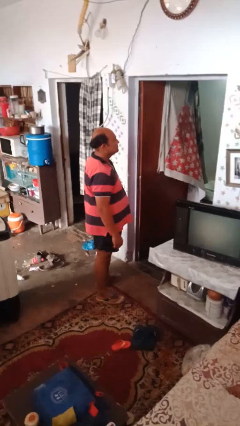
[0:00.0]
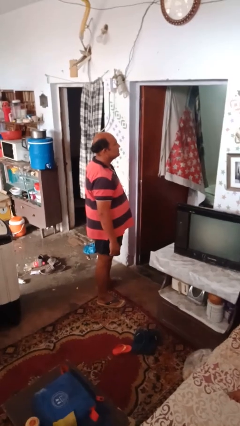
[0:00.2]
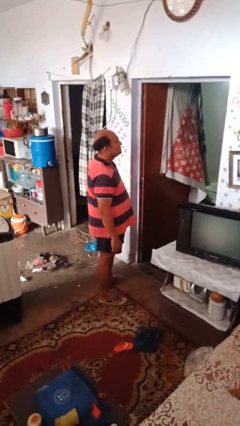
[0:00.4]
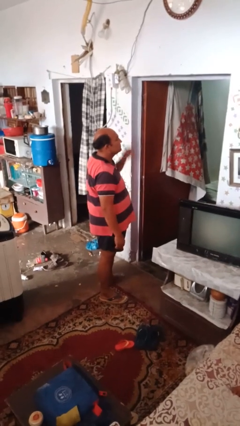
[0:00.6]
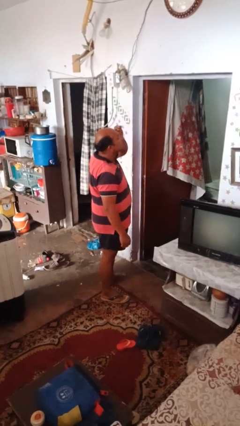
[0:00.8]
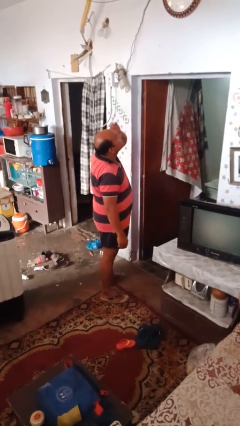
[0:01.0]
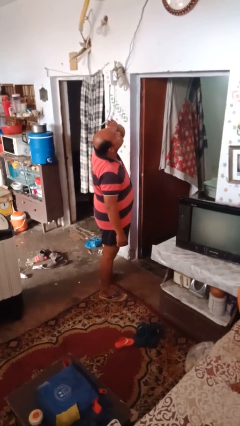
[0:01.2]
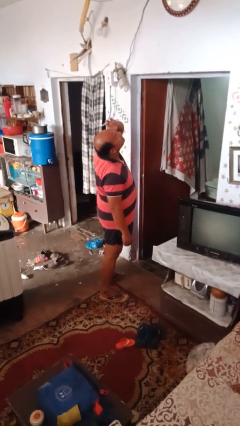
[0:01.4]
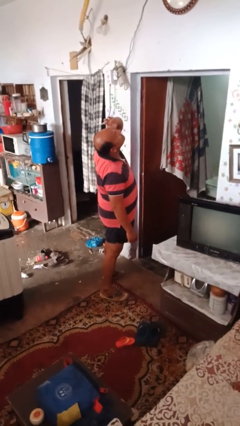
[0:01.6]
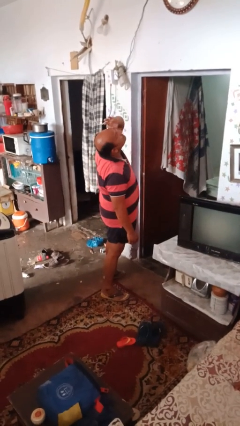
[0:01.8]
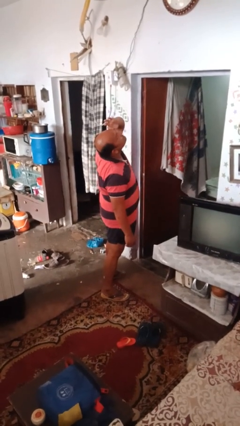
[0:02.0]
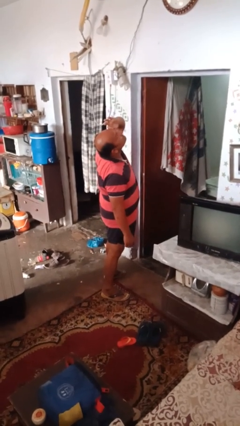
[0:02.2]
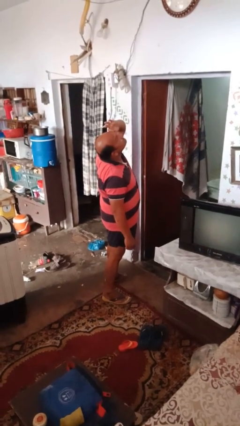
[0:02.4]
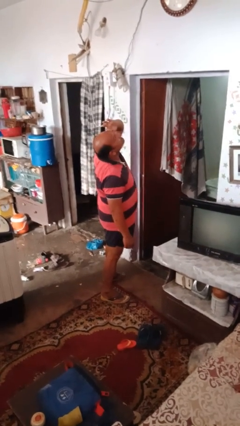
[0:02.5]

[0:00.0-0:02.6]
person gestures watch closely

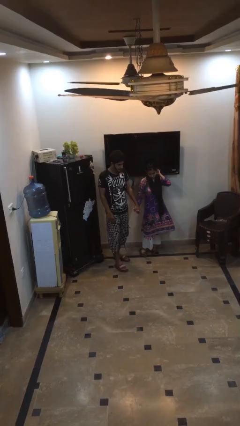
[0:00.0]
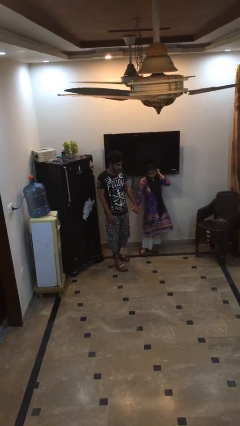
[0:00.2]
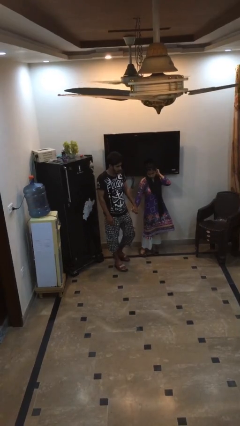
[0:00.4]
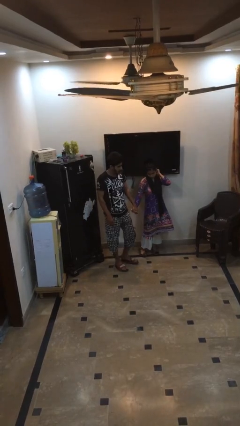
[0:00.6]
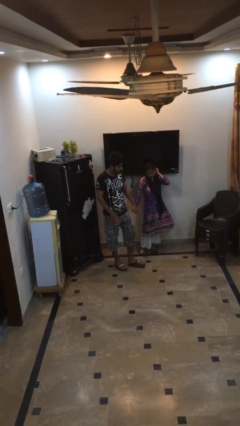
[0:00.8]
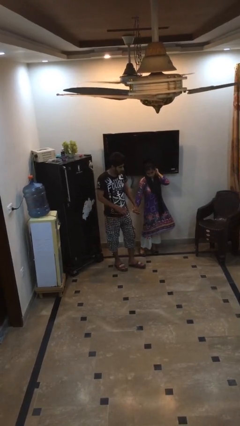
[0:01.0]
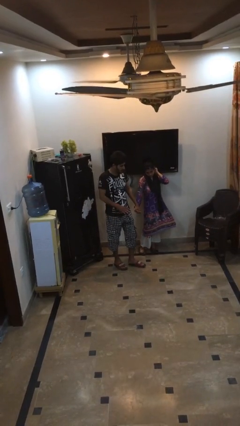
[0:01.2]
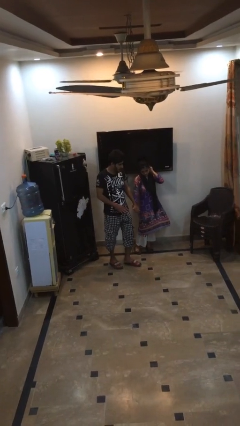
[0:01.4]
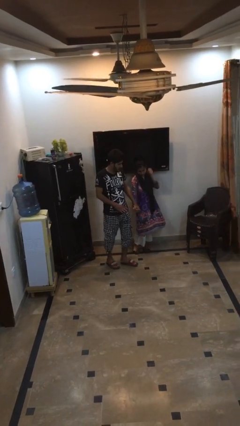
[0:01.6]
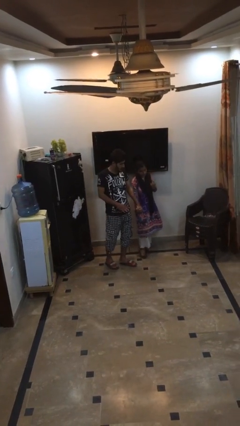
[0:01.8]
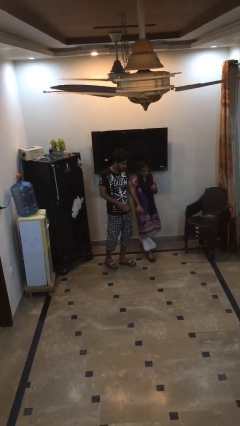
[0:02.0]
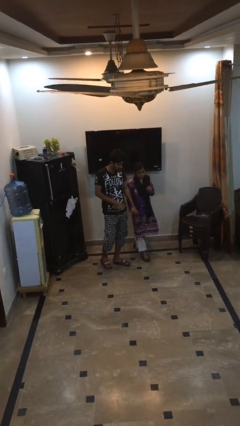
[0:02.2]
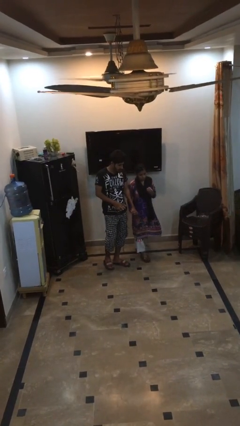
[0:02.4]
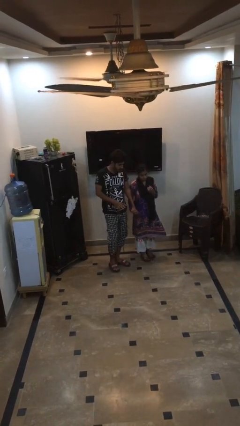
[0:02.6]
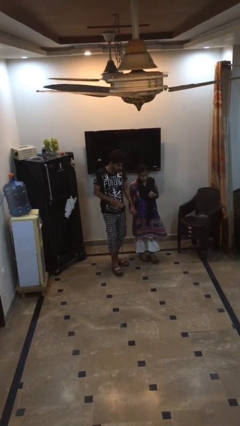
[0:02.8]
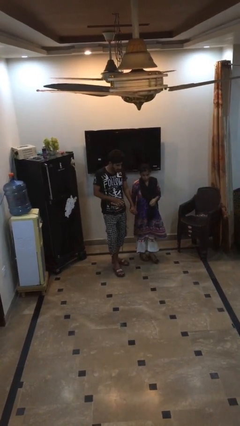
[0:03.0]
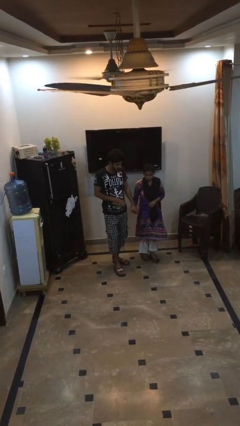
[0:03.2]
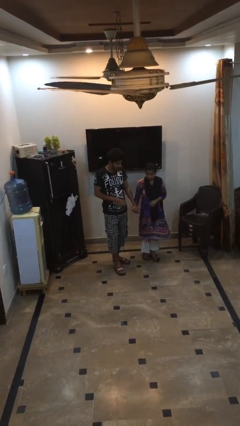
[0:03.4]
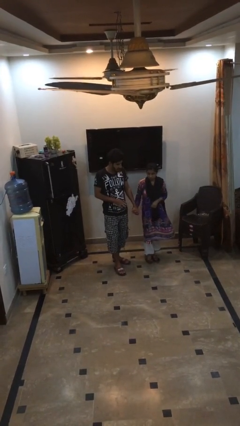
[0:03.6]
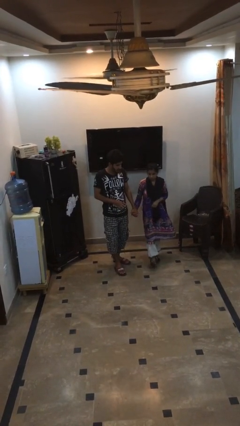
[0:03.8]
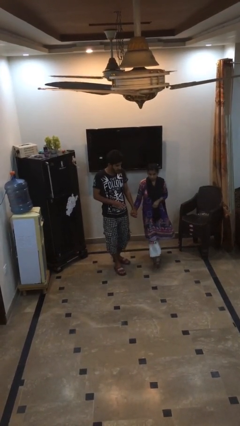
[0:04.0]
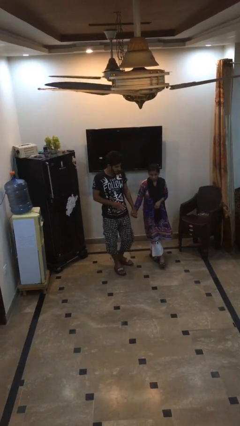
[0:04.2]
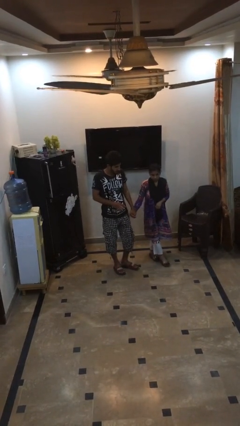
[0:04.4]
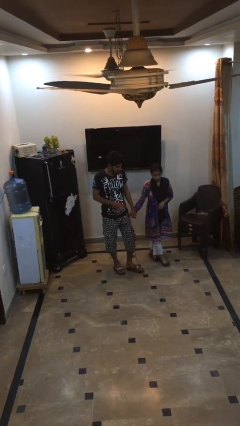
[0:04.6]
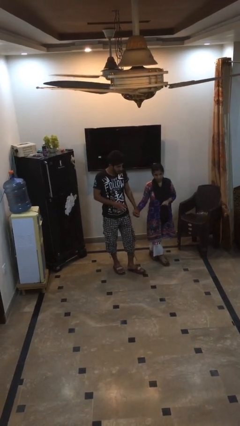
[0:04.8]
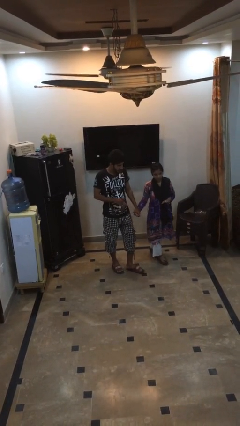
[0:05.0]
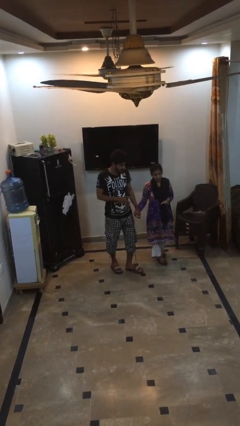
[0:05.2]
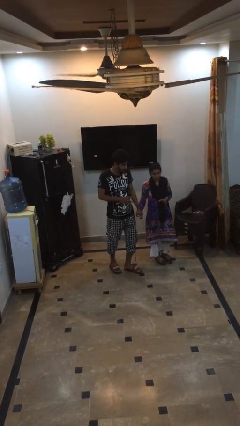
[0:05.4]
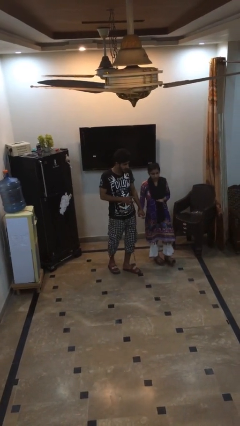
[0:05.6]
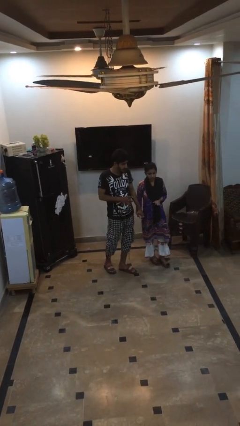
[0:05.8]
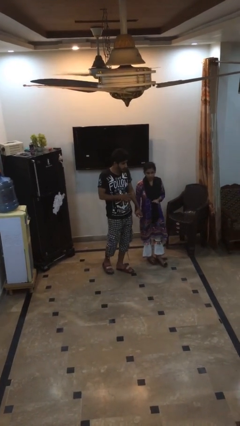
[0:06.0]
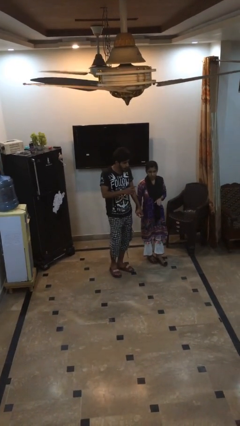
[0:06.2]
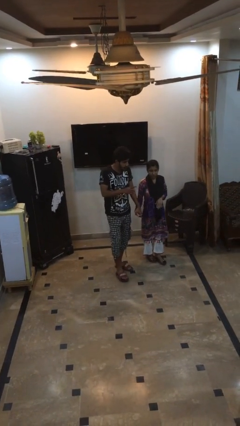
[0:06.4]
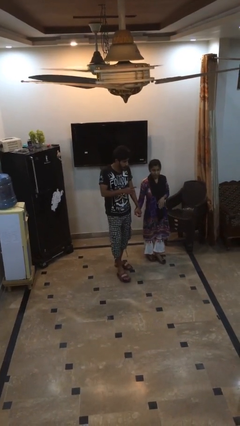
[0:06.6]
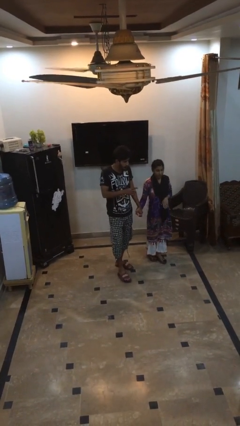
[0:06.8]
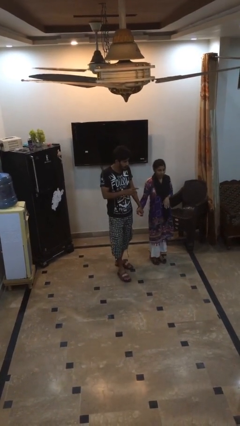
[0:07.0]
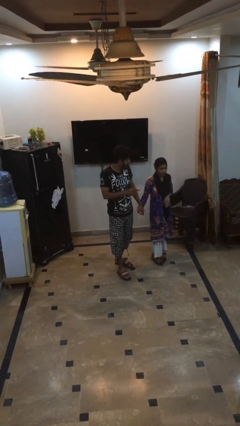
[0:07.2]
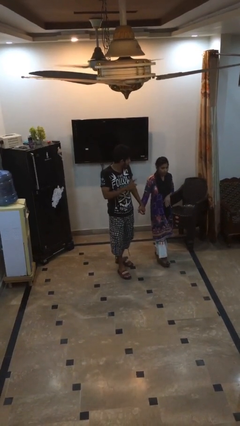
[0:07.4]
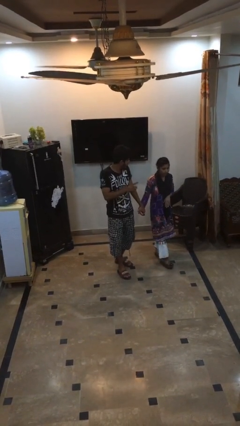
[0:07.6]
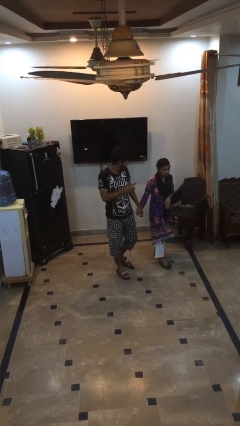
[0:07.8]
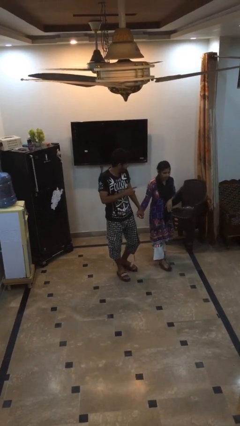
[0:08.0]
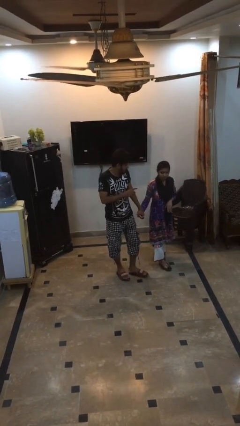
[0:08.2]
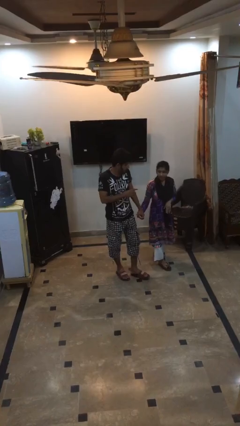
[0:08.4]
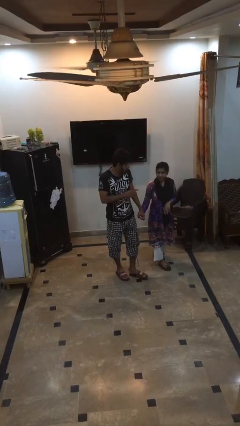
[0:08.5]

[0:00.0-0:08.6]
person holds hand

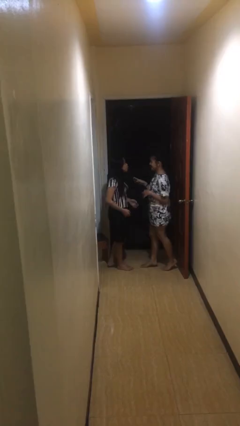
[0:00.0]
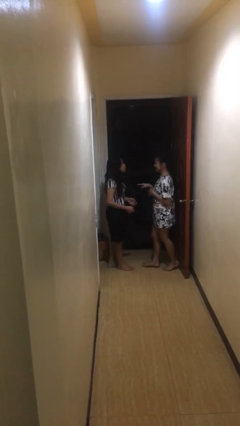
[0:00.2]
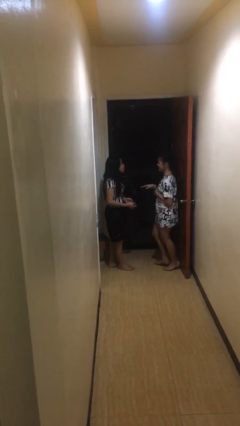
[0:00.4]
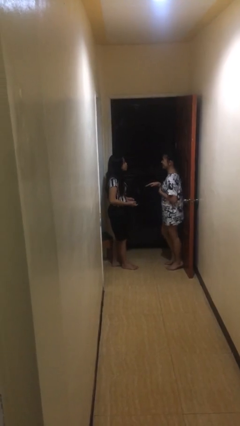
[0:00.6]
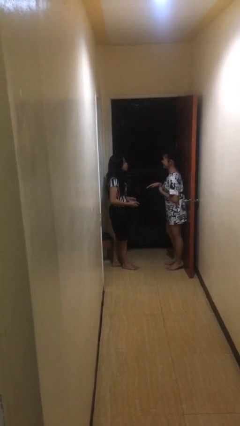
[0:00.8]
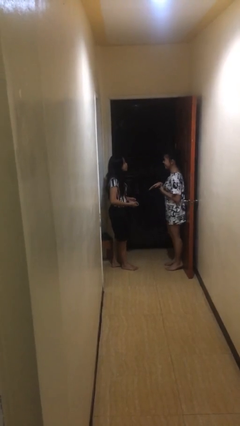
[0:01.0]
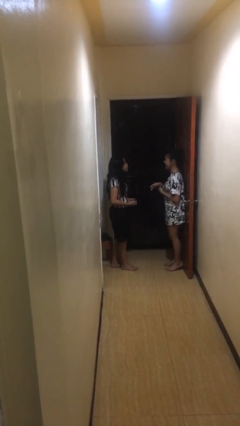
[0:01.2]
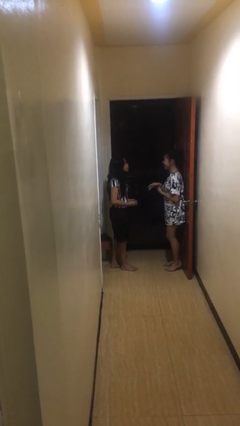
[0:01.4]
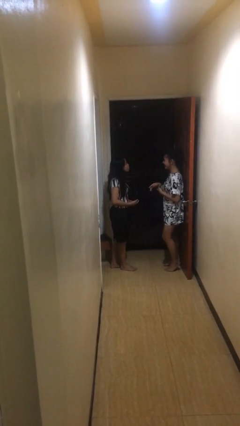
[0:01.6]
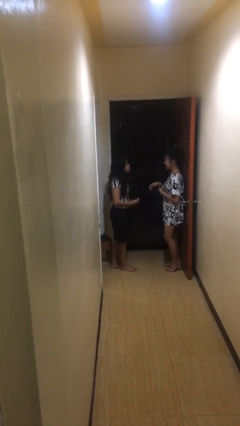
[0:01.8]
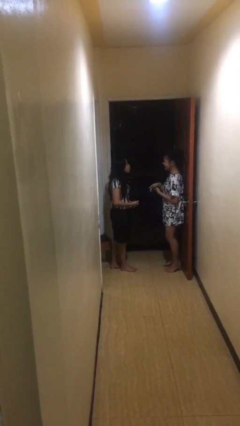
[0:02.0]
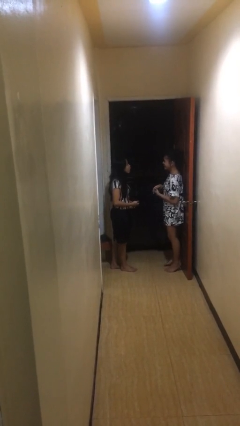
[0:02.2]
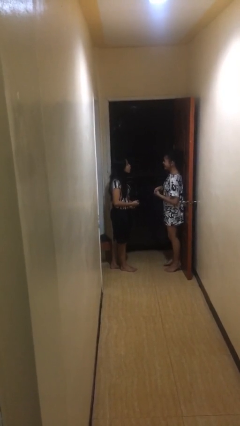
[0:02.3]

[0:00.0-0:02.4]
person talks to person

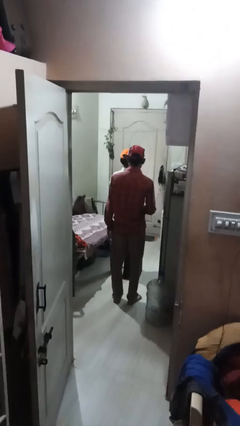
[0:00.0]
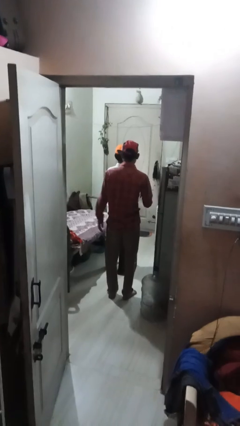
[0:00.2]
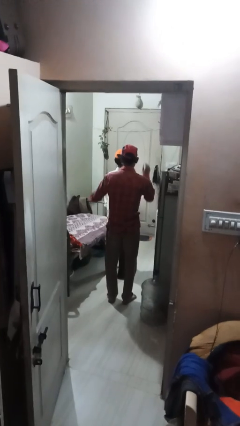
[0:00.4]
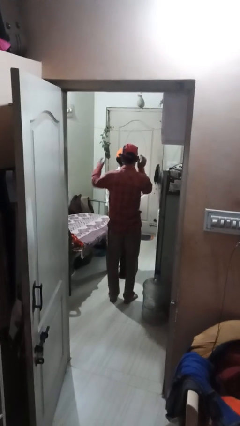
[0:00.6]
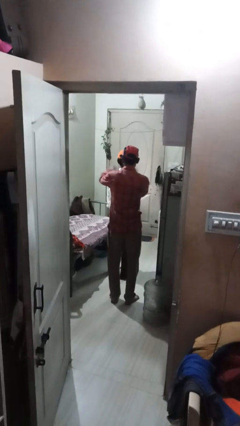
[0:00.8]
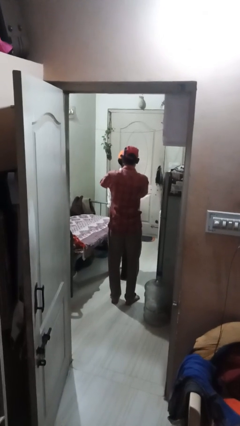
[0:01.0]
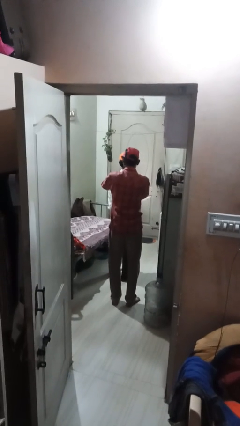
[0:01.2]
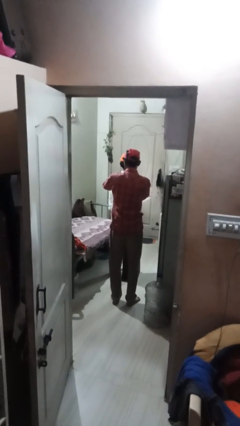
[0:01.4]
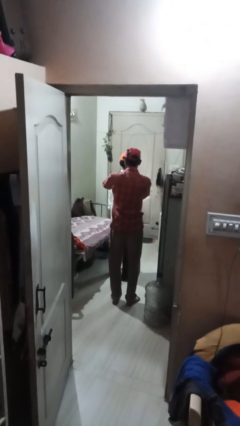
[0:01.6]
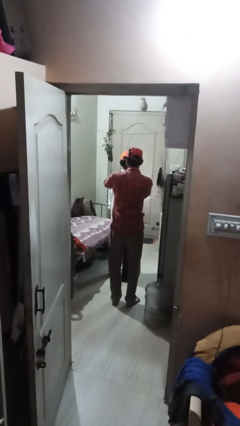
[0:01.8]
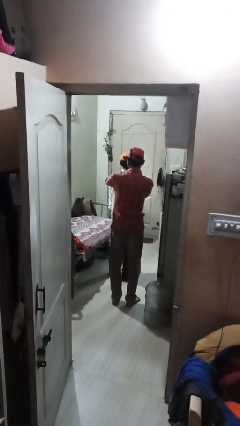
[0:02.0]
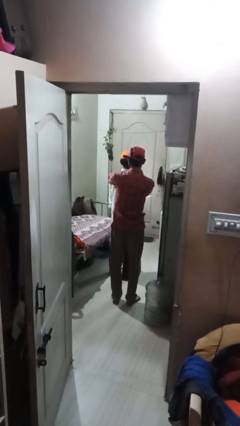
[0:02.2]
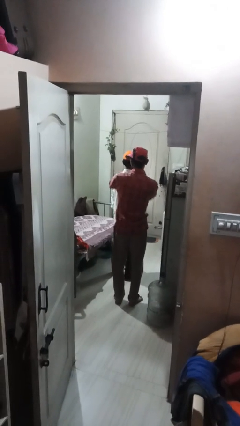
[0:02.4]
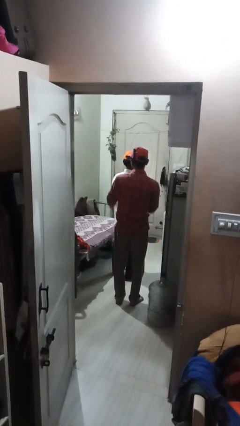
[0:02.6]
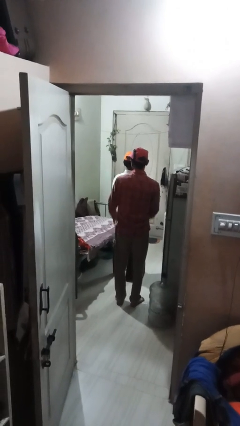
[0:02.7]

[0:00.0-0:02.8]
person touches back of person

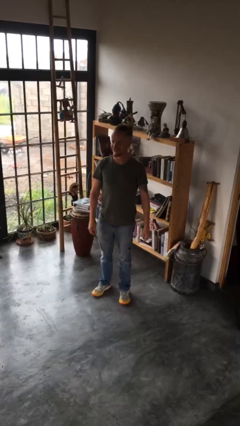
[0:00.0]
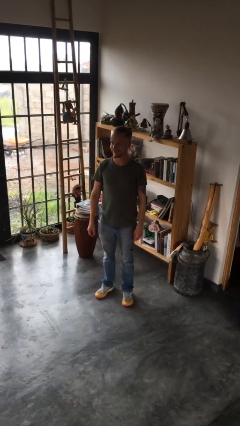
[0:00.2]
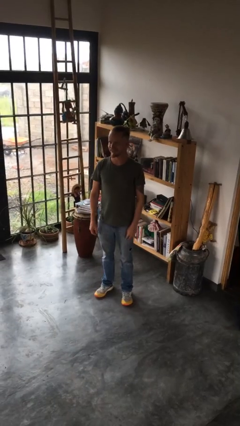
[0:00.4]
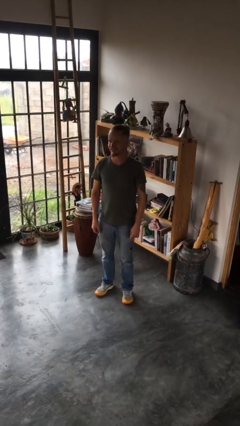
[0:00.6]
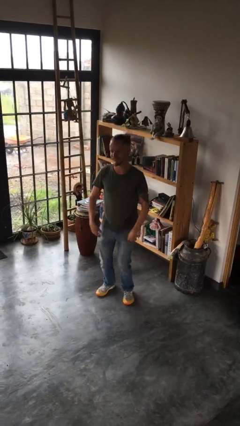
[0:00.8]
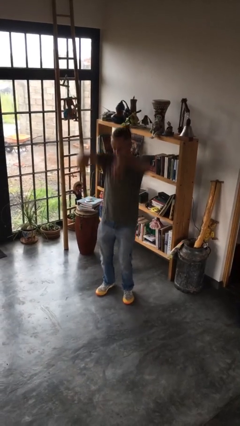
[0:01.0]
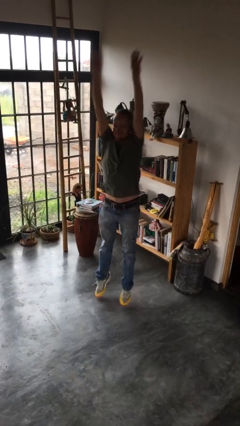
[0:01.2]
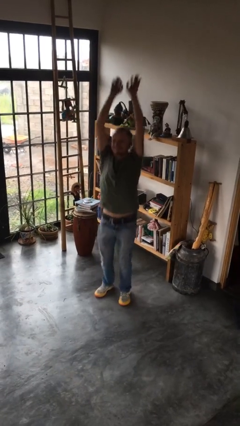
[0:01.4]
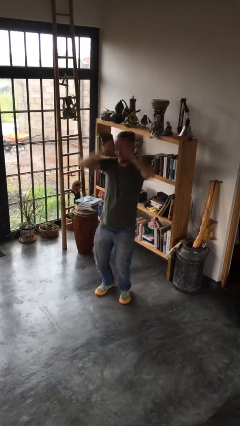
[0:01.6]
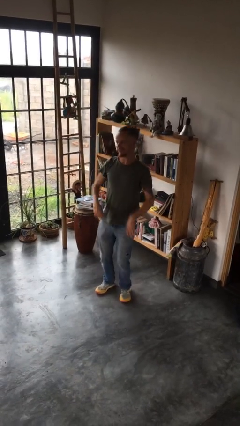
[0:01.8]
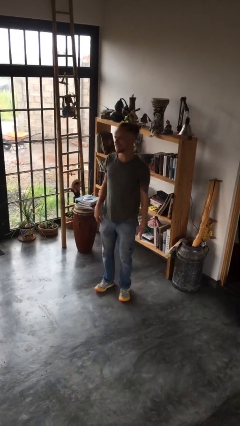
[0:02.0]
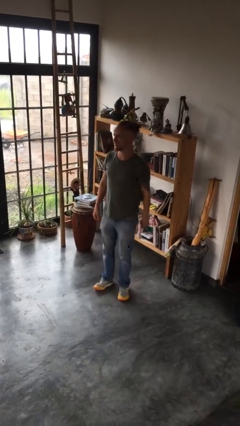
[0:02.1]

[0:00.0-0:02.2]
person jumps
